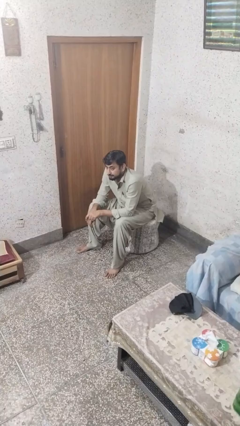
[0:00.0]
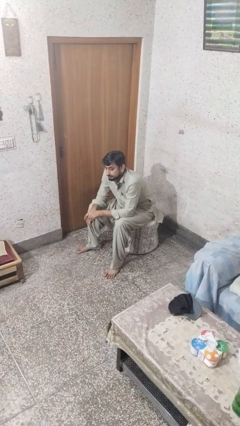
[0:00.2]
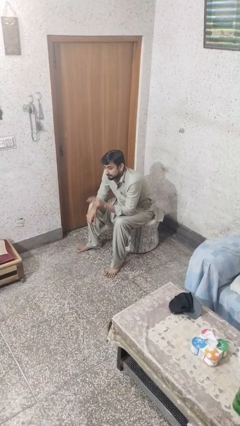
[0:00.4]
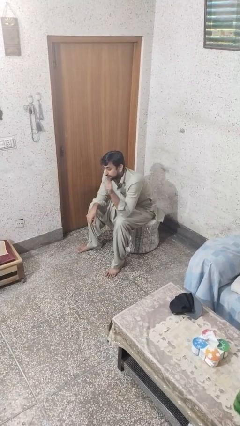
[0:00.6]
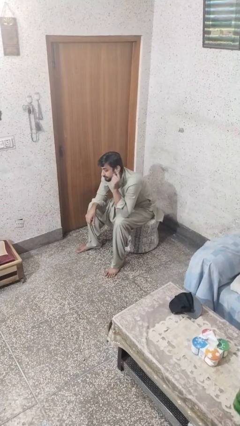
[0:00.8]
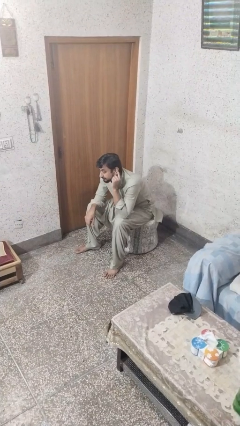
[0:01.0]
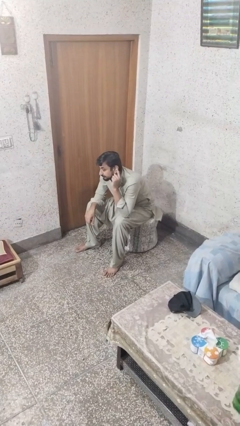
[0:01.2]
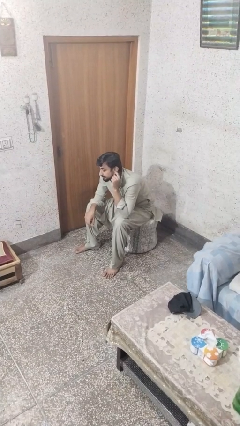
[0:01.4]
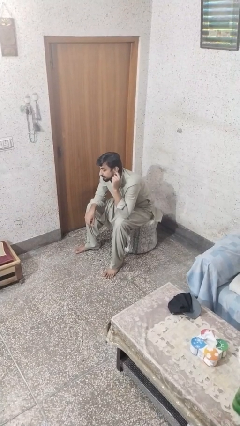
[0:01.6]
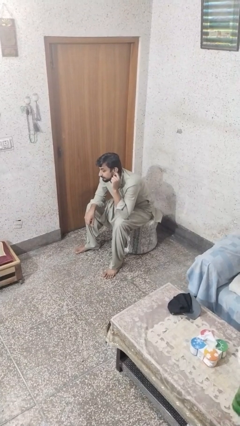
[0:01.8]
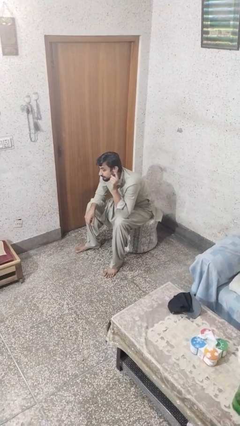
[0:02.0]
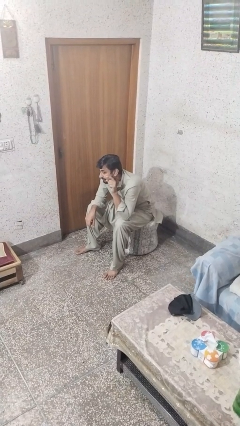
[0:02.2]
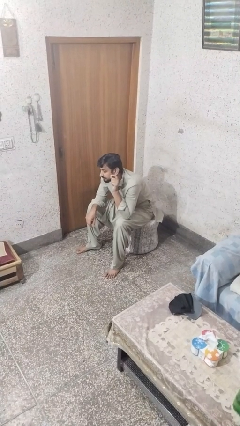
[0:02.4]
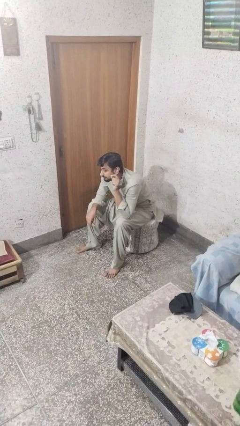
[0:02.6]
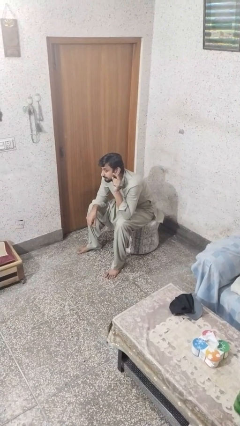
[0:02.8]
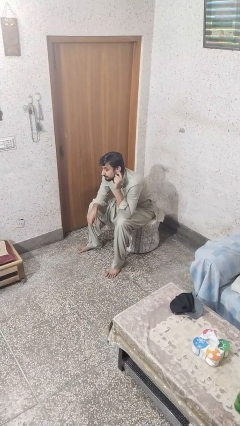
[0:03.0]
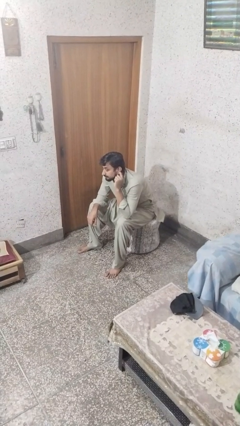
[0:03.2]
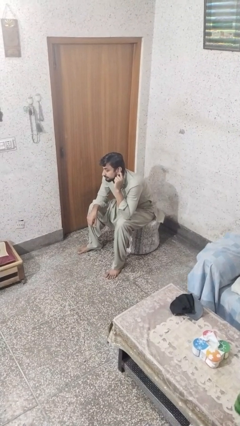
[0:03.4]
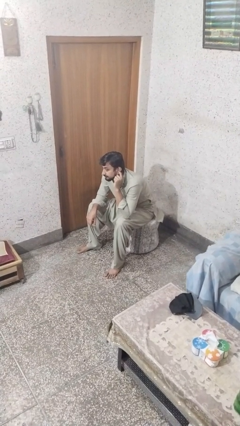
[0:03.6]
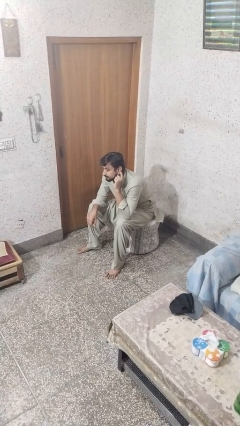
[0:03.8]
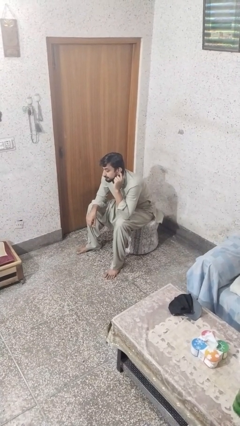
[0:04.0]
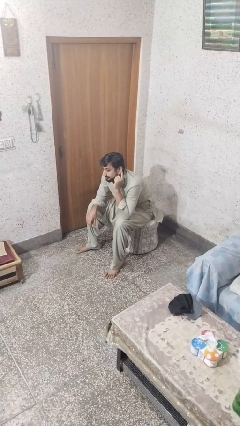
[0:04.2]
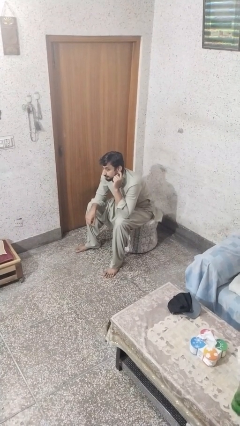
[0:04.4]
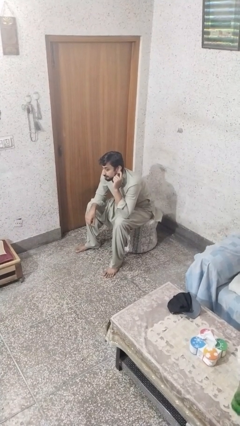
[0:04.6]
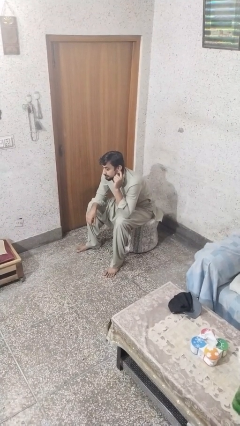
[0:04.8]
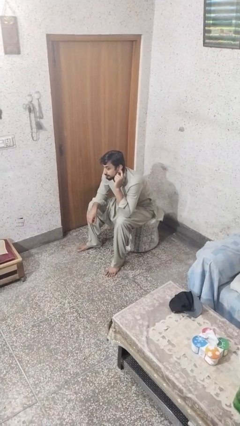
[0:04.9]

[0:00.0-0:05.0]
person gestures listen closely

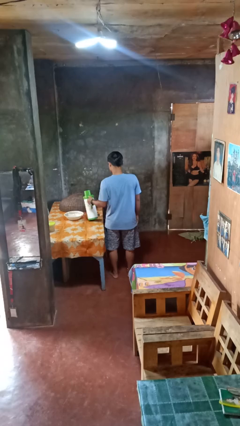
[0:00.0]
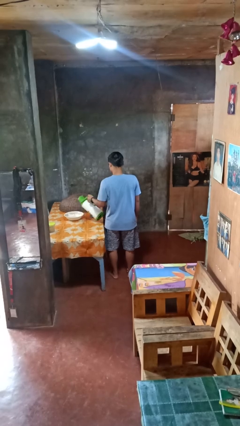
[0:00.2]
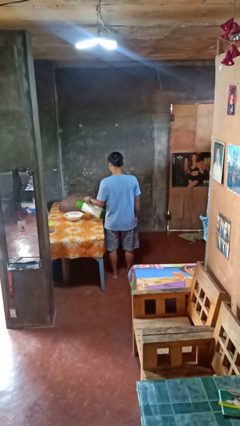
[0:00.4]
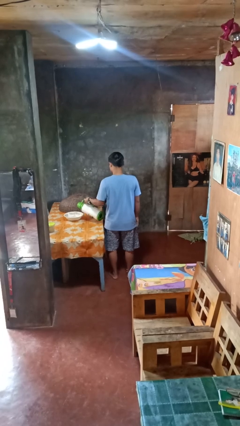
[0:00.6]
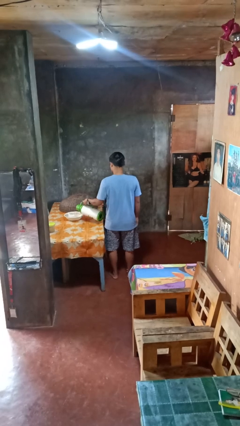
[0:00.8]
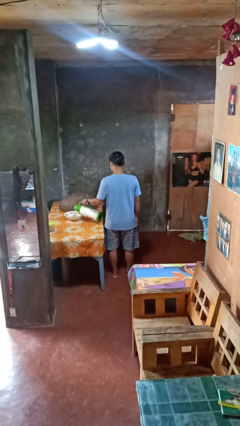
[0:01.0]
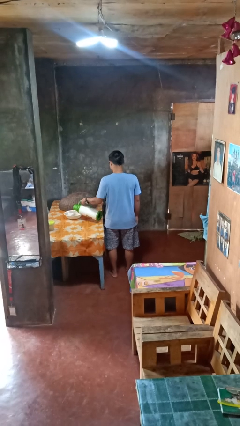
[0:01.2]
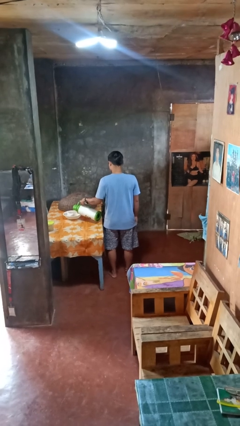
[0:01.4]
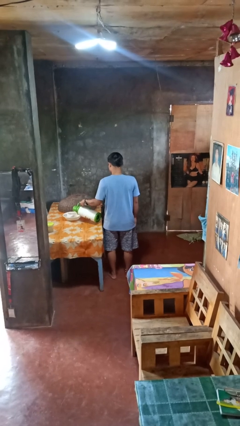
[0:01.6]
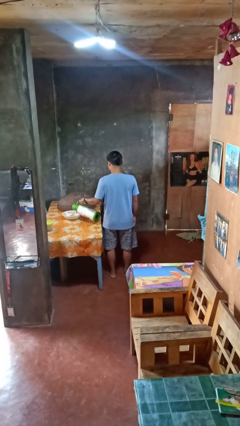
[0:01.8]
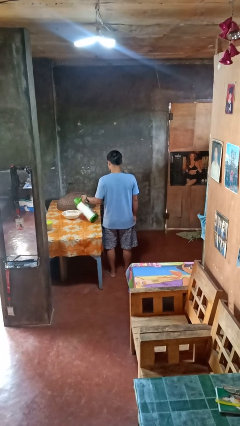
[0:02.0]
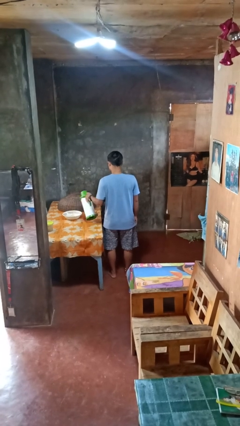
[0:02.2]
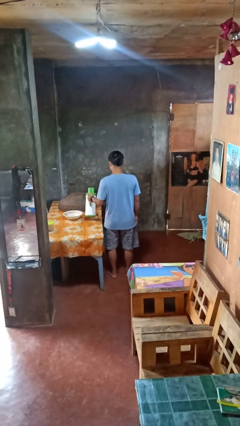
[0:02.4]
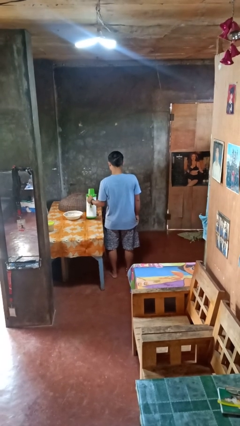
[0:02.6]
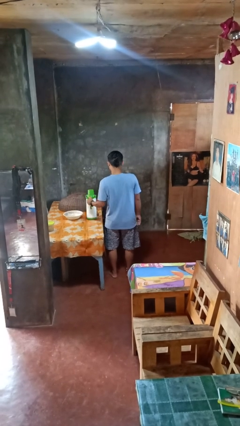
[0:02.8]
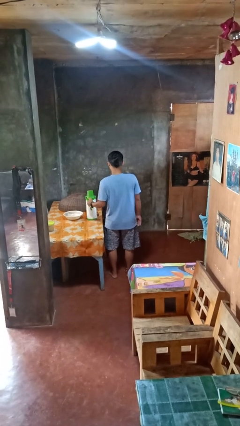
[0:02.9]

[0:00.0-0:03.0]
person pours into bowl

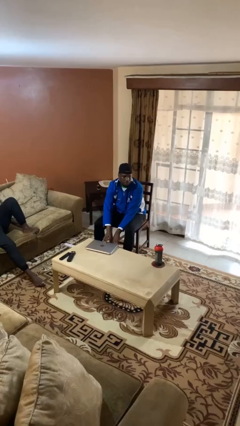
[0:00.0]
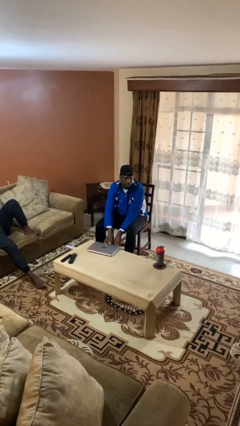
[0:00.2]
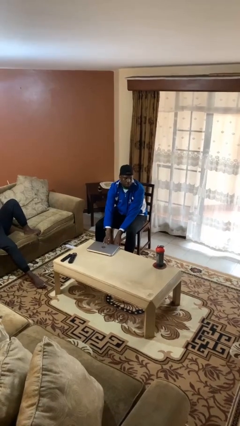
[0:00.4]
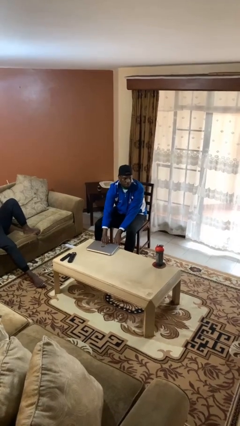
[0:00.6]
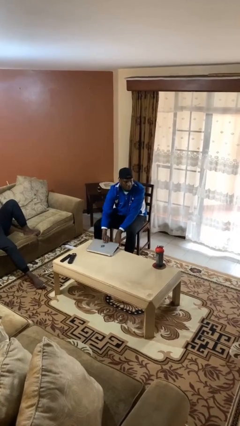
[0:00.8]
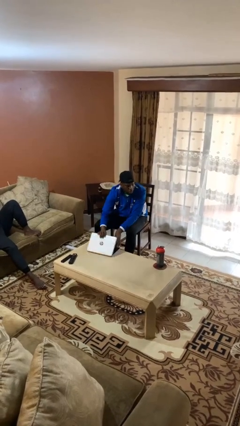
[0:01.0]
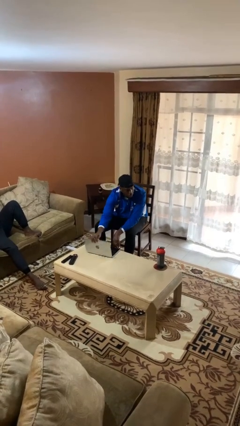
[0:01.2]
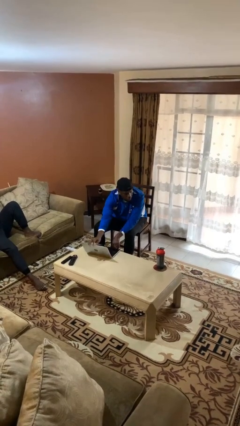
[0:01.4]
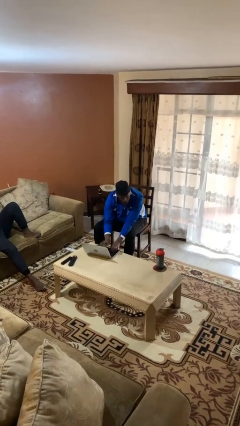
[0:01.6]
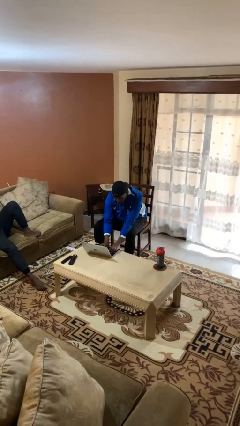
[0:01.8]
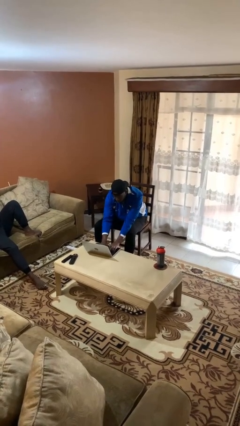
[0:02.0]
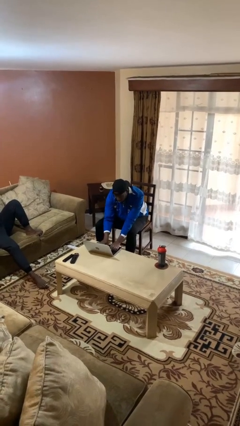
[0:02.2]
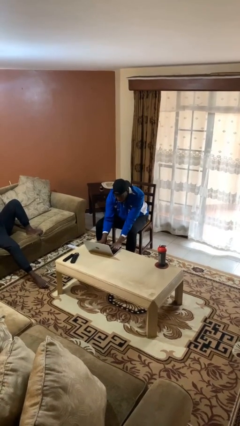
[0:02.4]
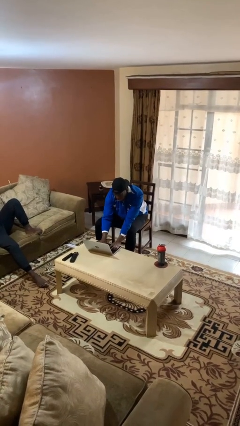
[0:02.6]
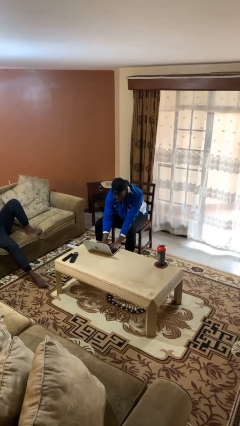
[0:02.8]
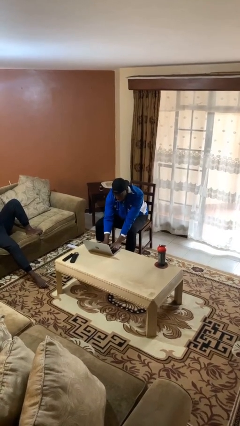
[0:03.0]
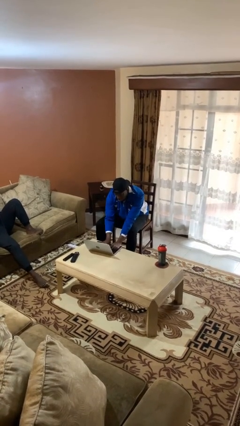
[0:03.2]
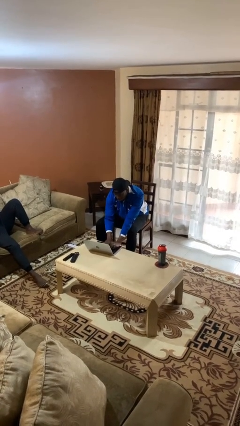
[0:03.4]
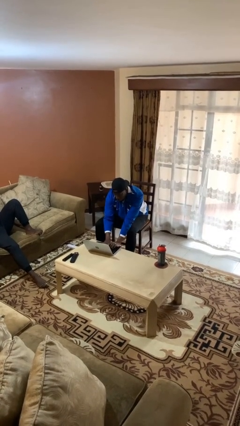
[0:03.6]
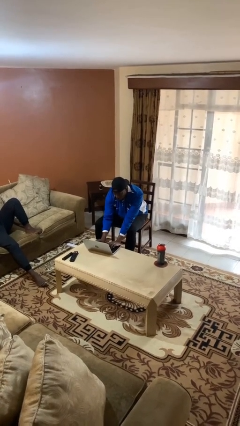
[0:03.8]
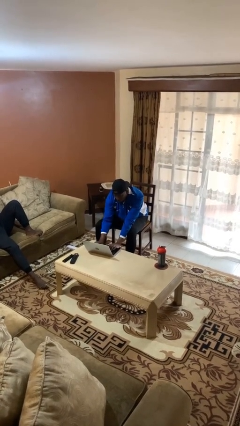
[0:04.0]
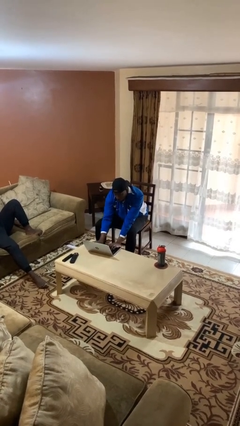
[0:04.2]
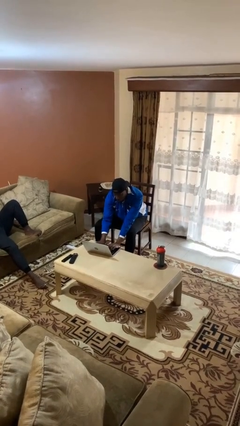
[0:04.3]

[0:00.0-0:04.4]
person interacts with laptop

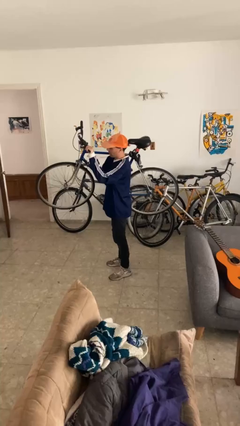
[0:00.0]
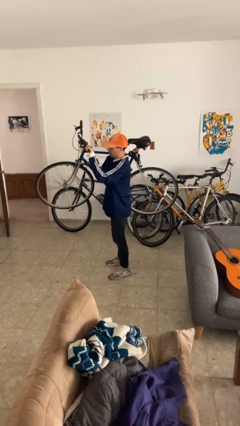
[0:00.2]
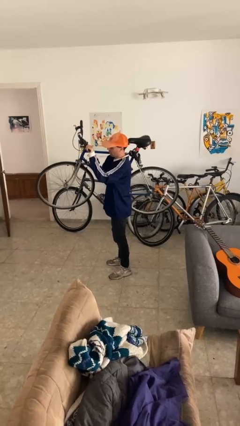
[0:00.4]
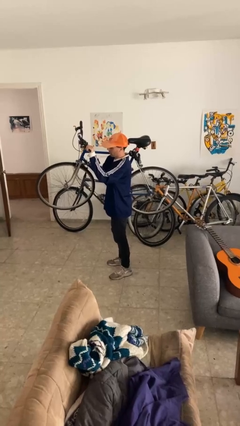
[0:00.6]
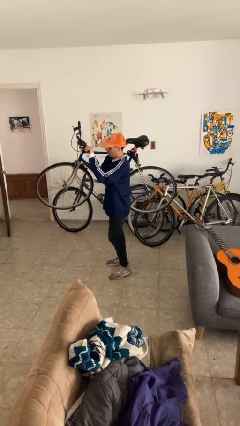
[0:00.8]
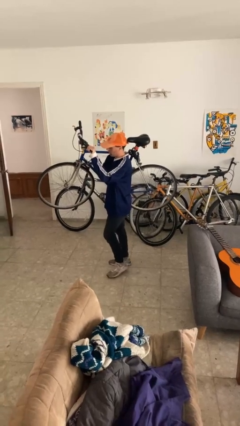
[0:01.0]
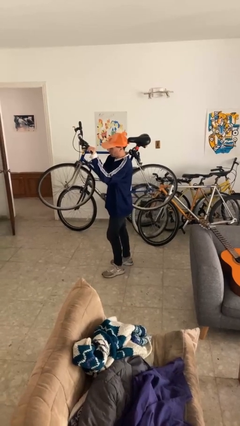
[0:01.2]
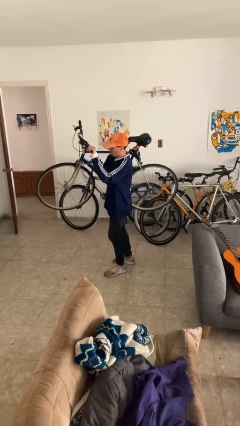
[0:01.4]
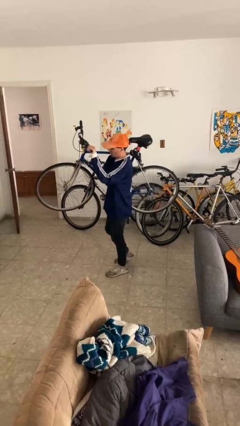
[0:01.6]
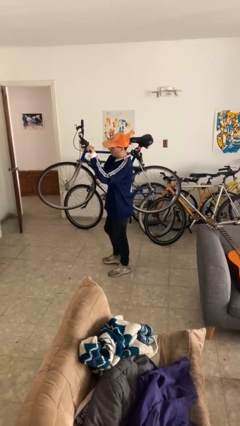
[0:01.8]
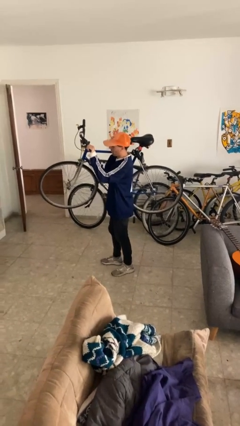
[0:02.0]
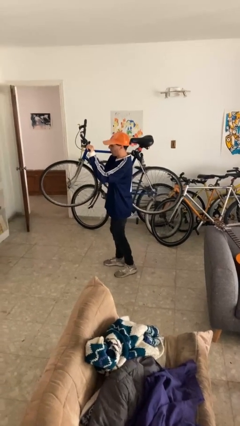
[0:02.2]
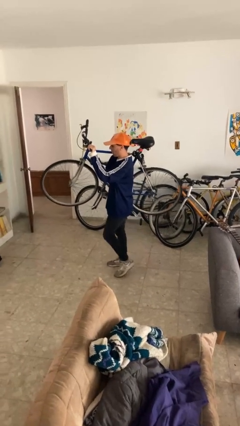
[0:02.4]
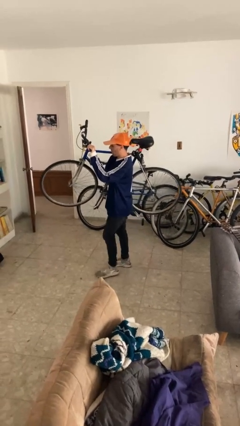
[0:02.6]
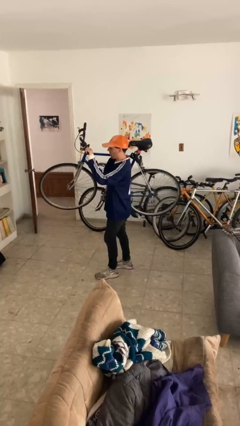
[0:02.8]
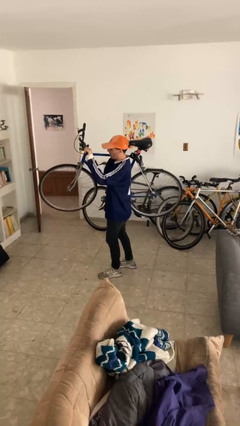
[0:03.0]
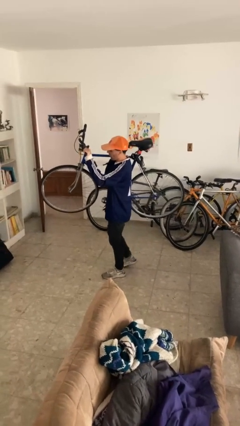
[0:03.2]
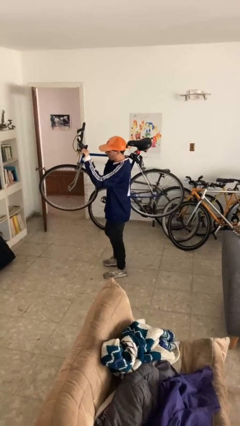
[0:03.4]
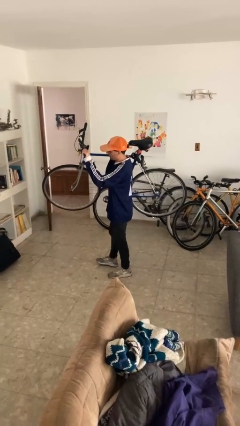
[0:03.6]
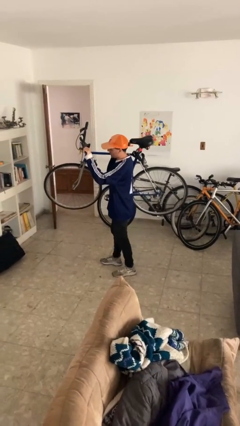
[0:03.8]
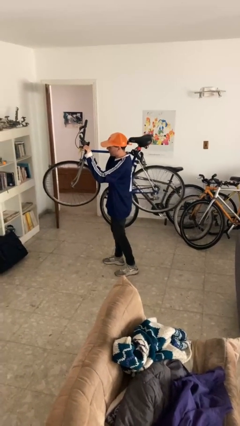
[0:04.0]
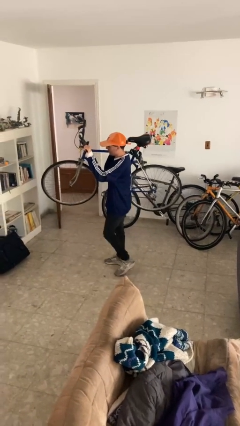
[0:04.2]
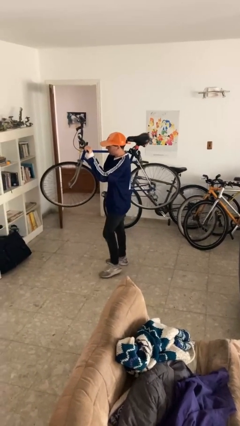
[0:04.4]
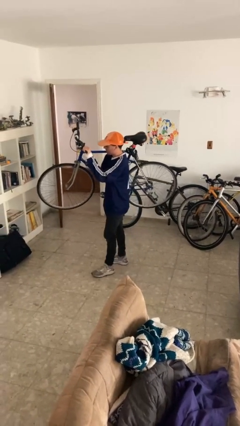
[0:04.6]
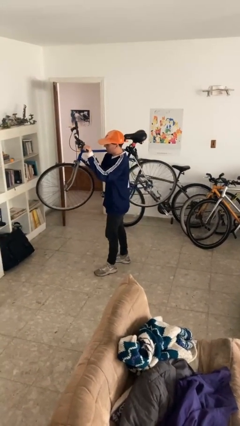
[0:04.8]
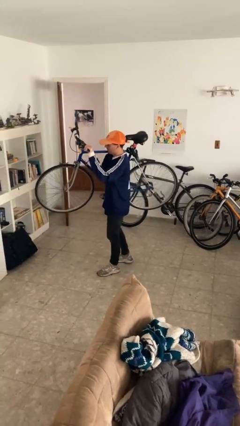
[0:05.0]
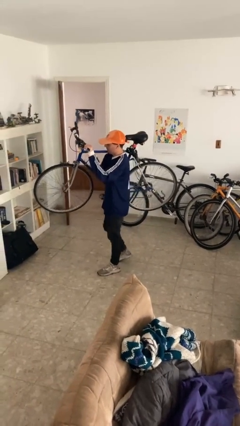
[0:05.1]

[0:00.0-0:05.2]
person carries bicycle

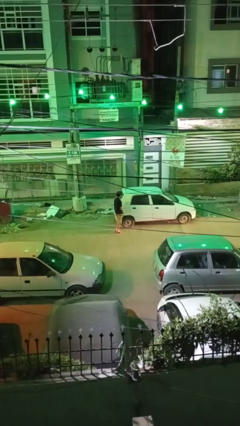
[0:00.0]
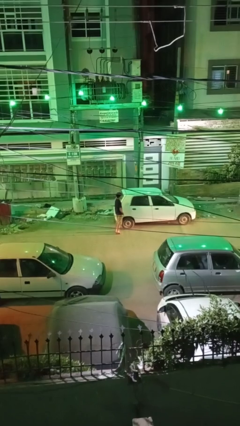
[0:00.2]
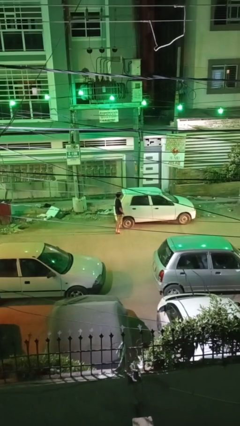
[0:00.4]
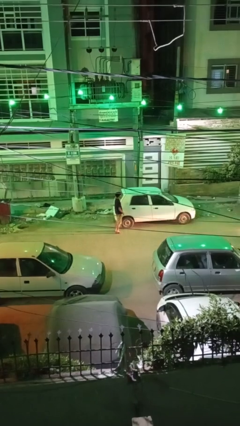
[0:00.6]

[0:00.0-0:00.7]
person kicks car tires
